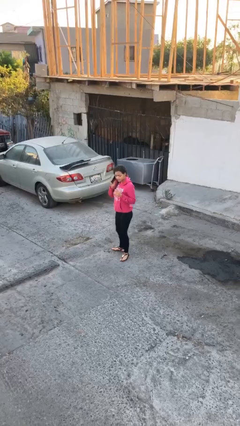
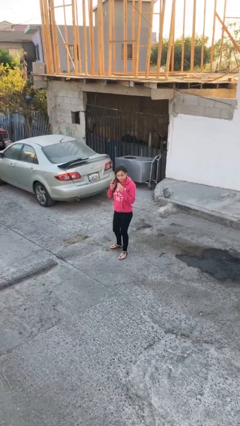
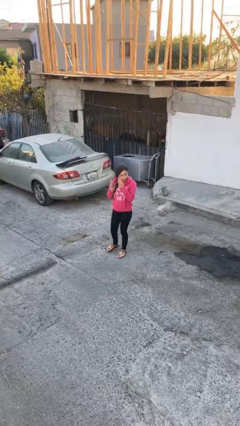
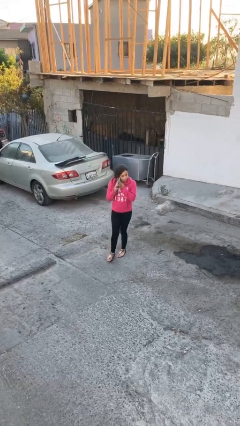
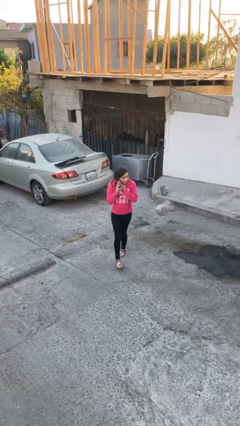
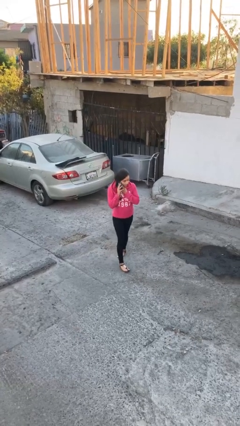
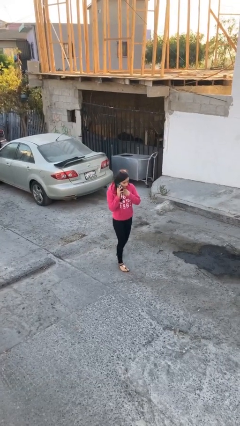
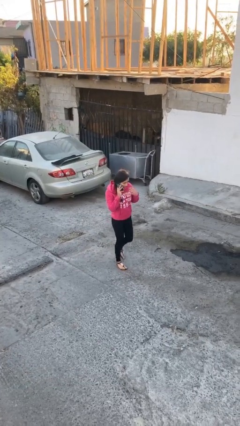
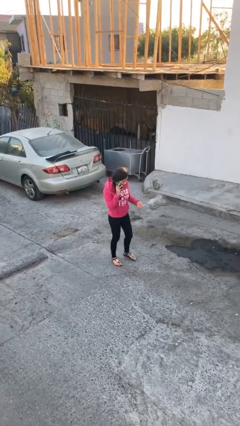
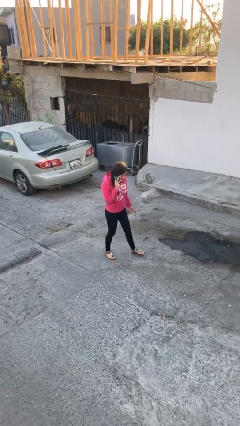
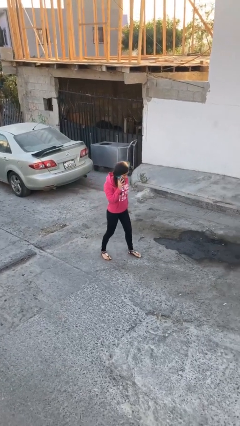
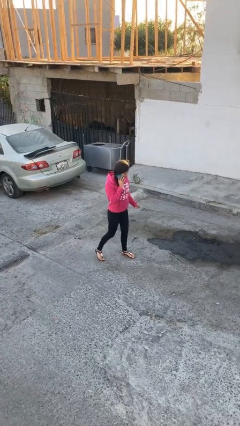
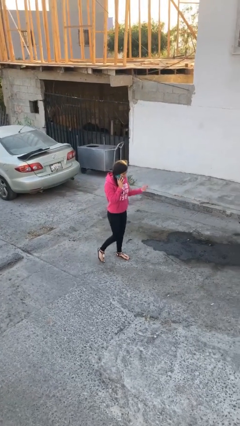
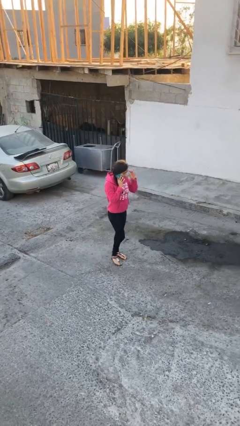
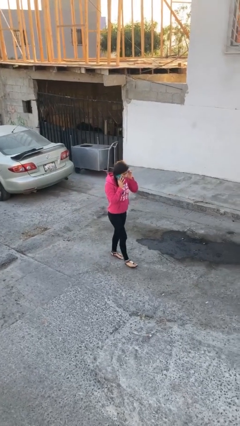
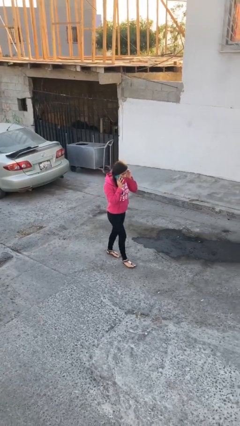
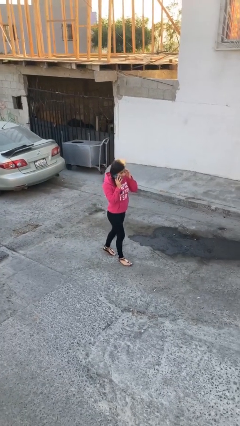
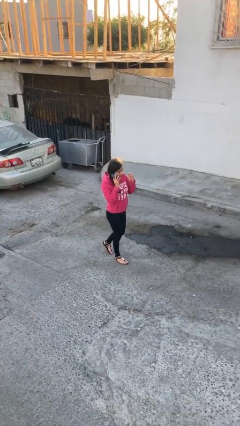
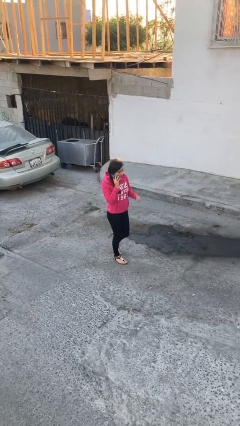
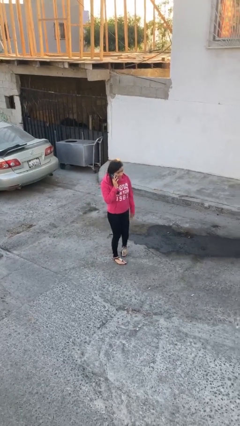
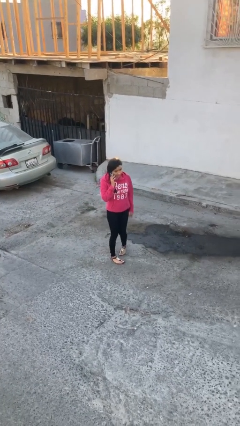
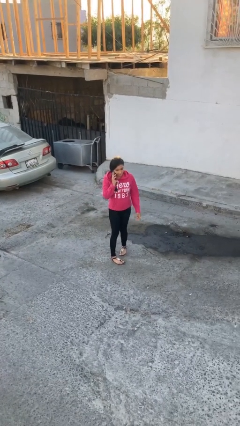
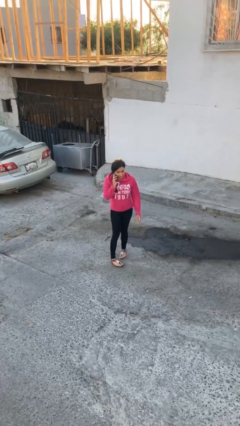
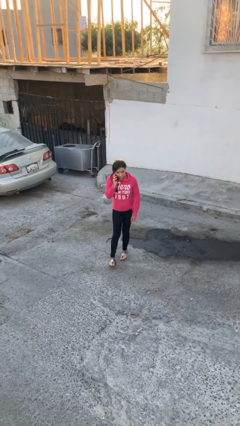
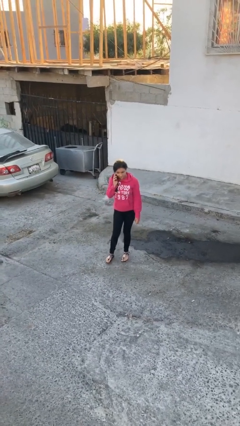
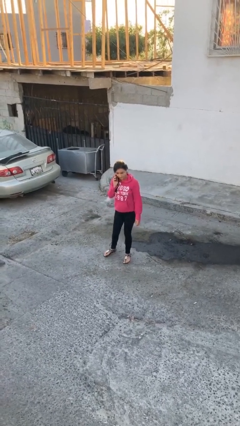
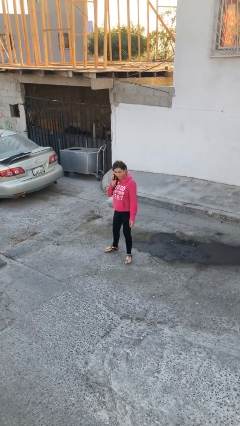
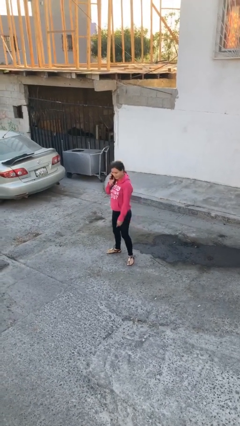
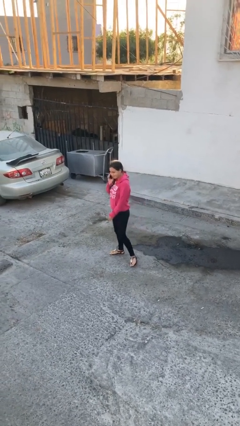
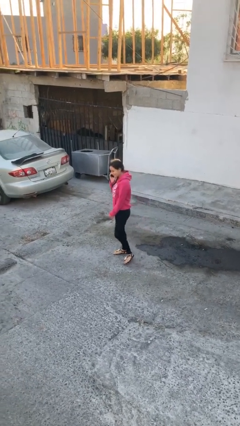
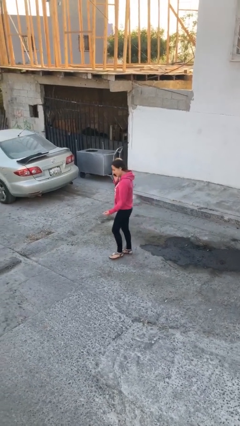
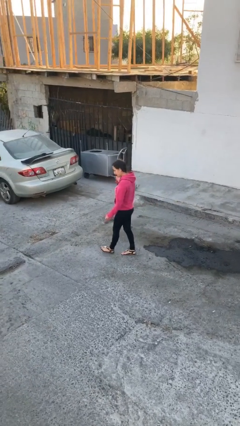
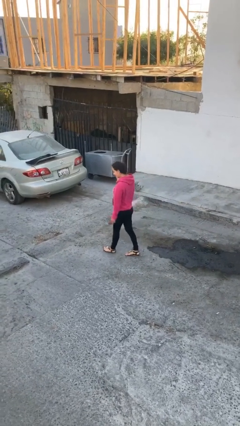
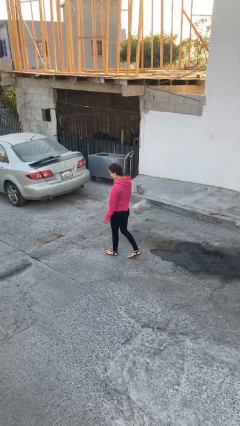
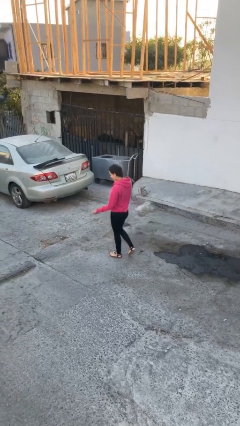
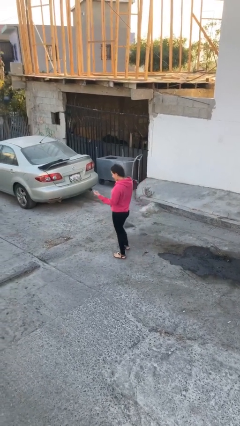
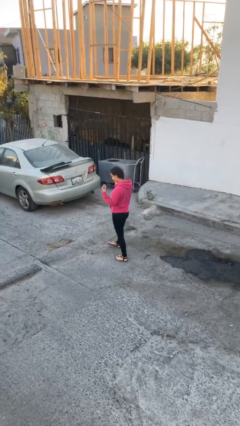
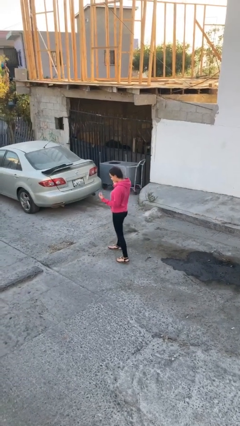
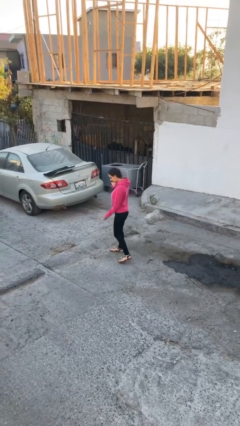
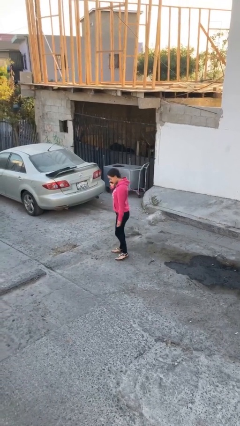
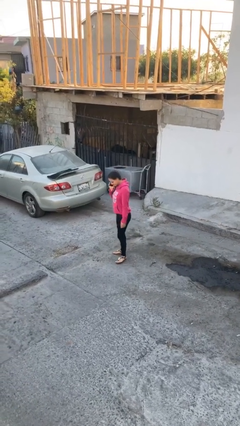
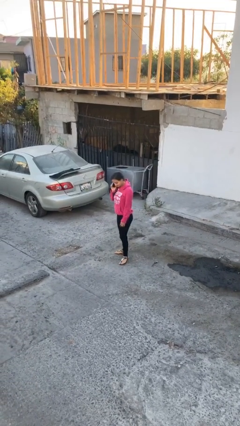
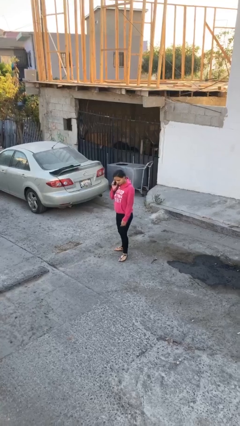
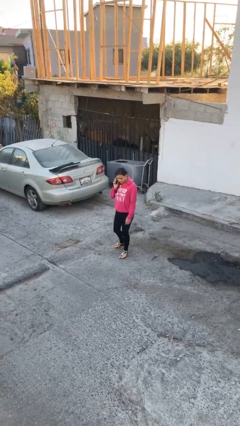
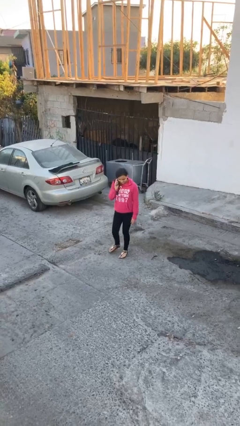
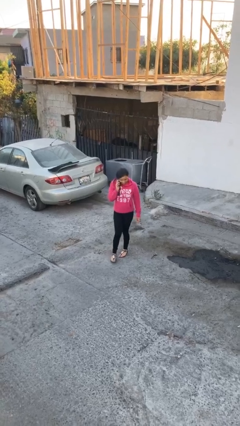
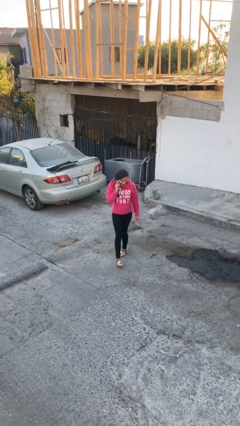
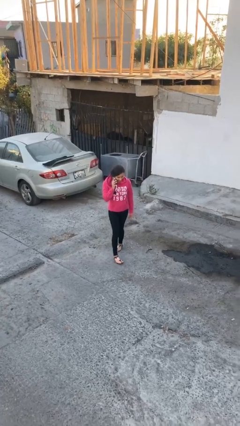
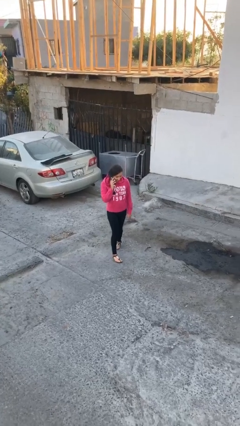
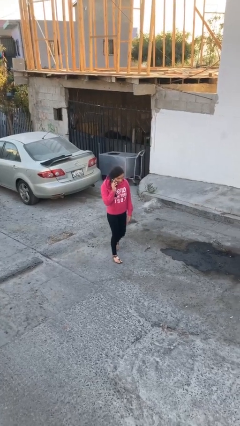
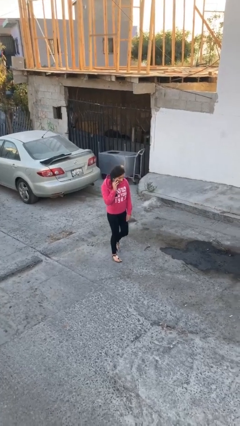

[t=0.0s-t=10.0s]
person talks on phone

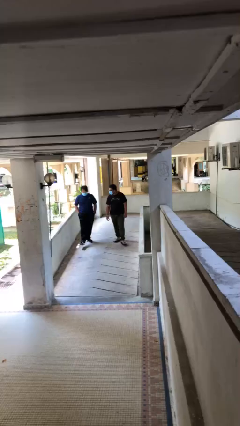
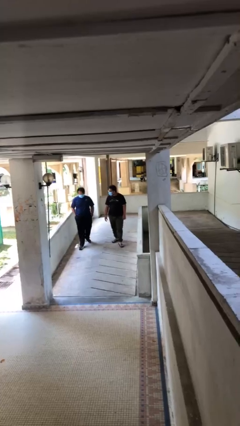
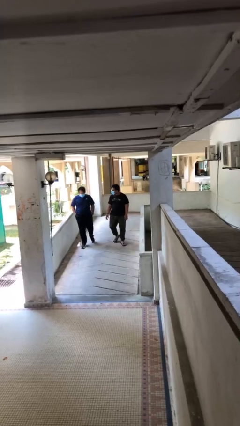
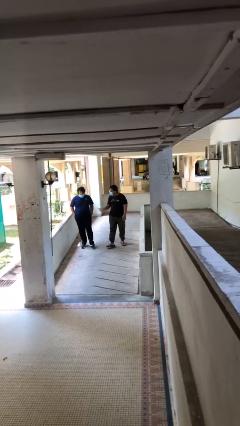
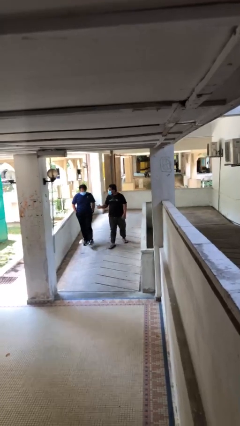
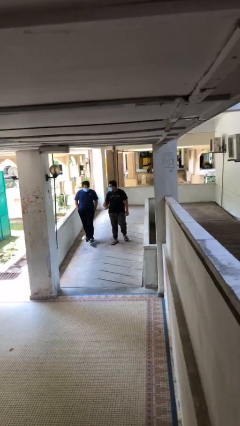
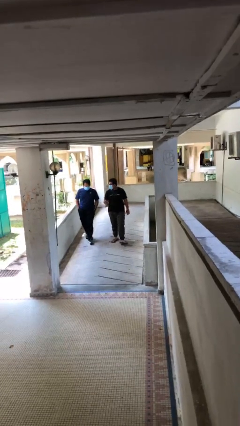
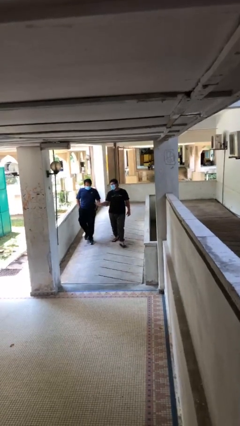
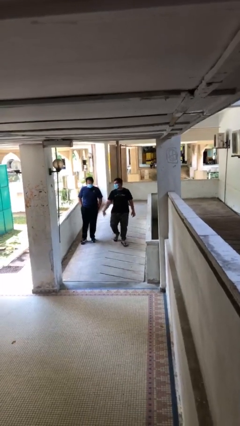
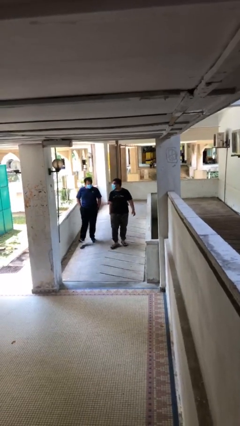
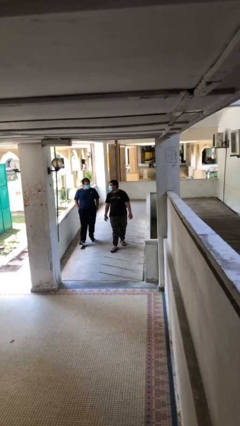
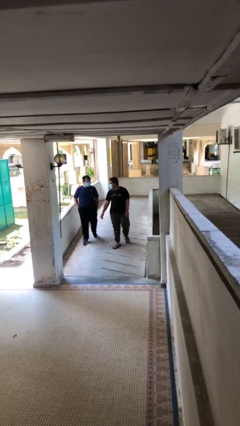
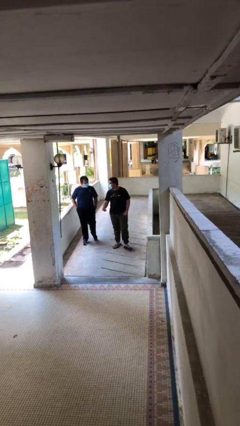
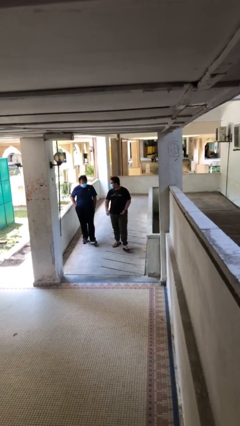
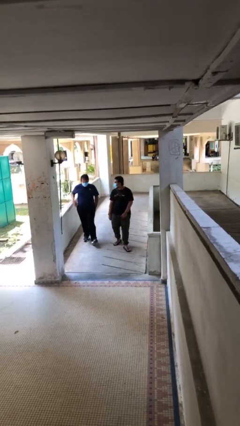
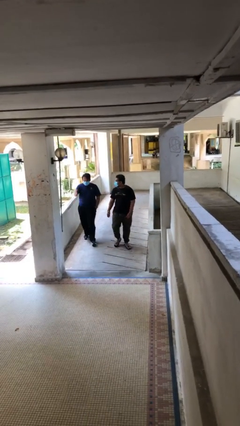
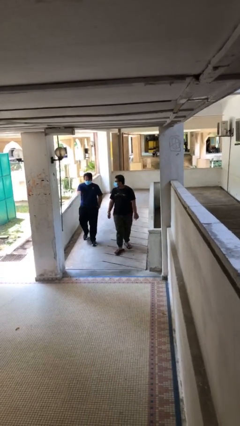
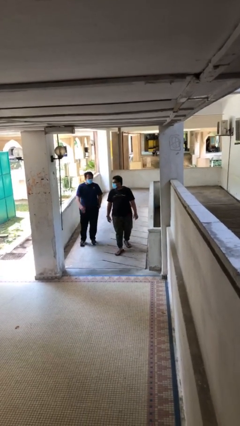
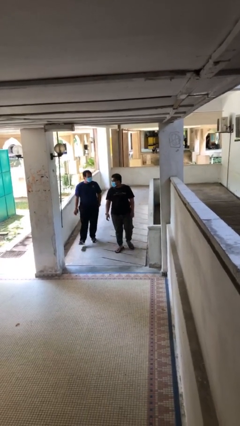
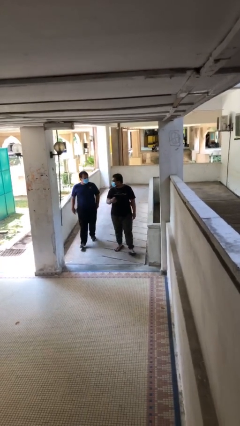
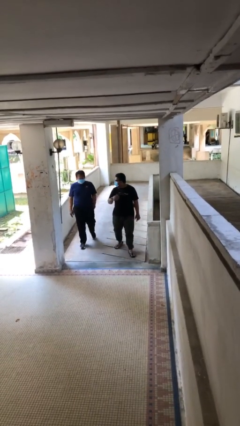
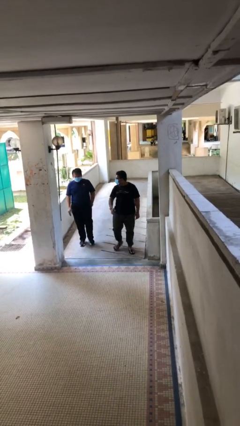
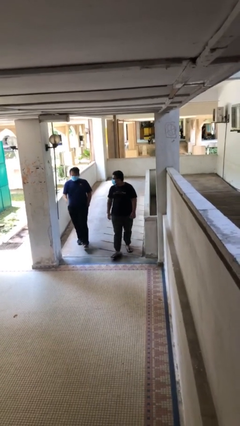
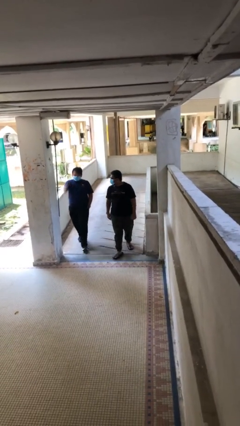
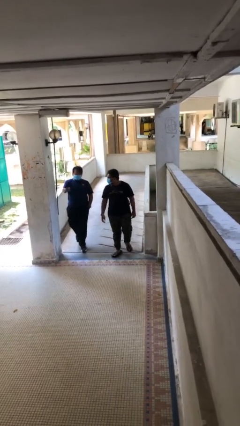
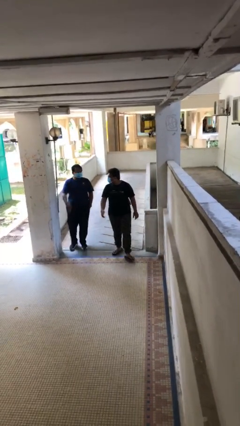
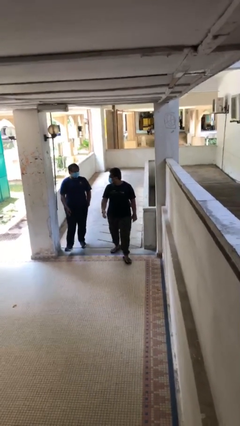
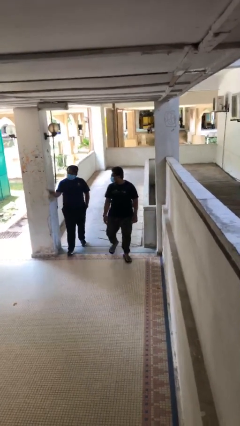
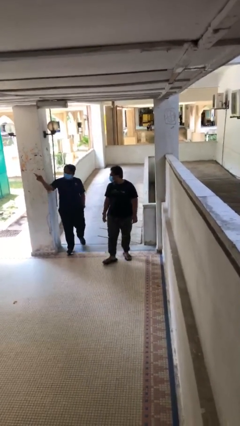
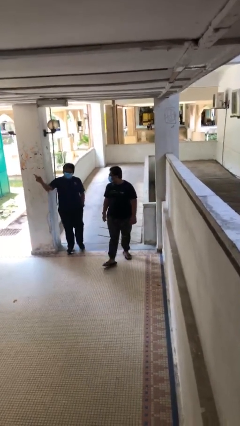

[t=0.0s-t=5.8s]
person talks to person

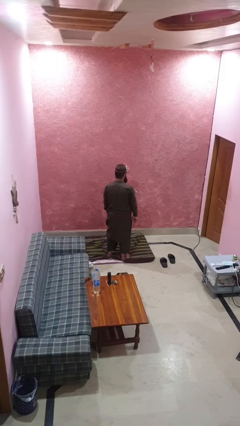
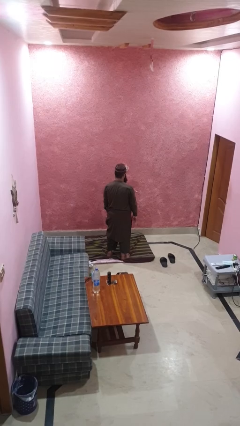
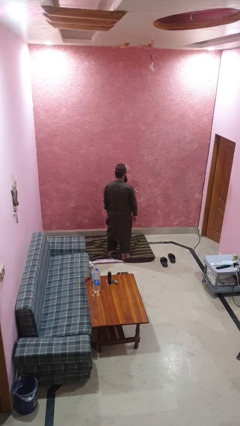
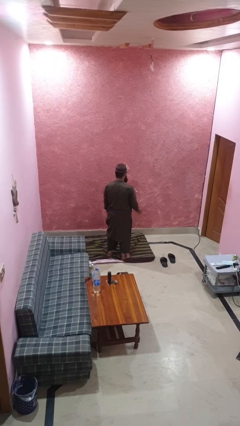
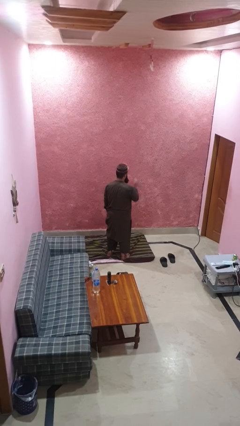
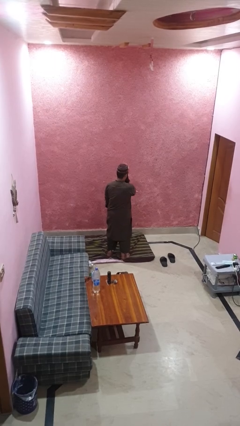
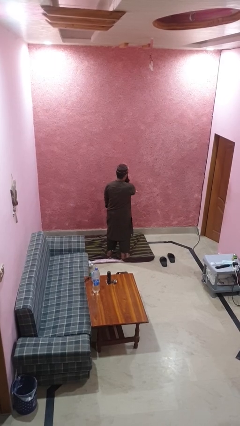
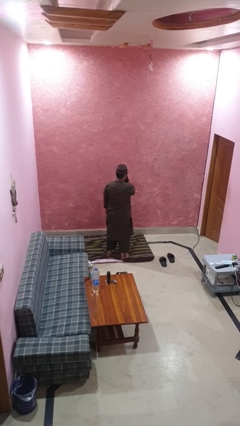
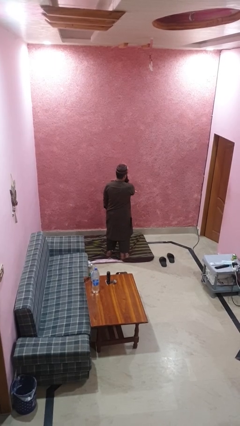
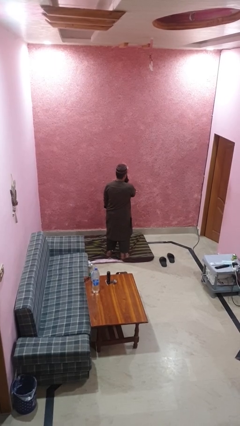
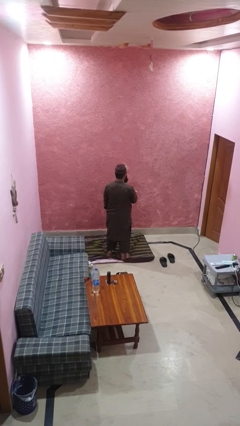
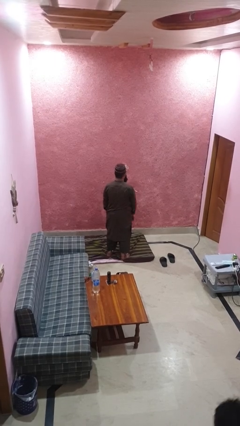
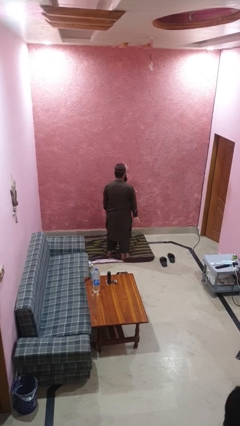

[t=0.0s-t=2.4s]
person drums on chest
